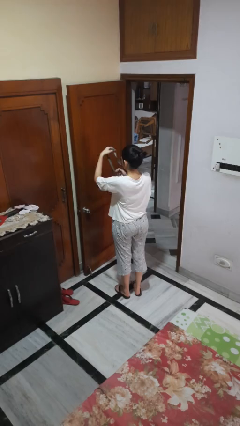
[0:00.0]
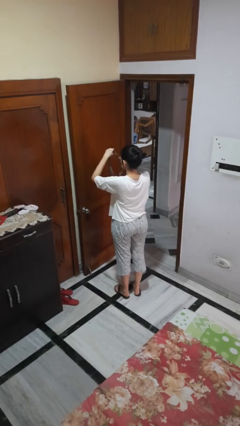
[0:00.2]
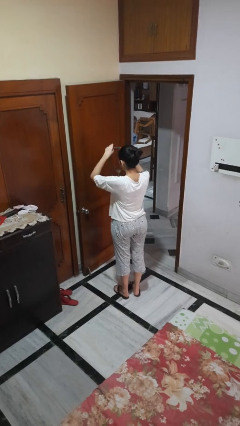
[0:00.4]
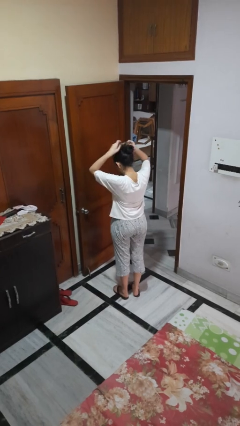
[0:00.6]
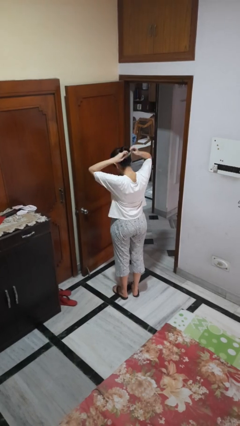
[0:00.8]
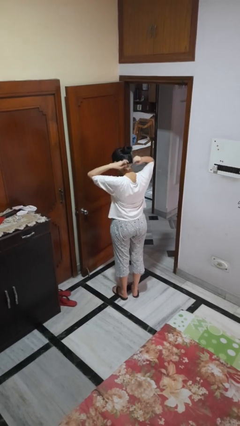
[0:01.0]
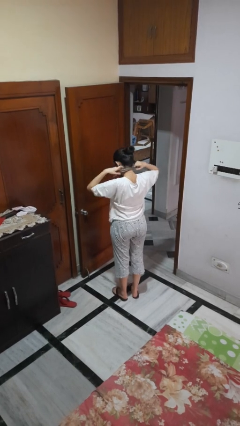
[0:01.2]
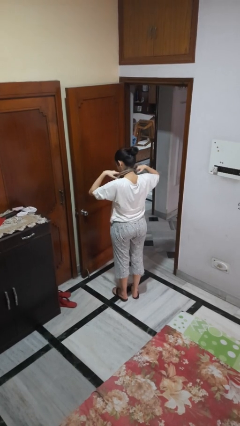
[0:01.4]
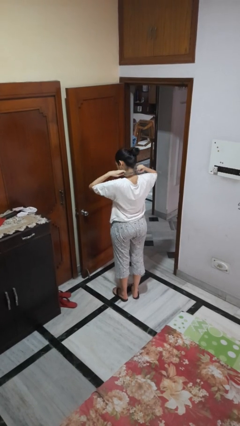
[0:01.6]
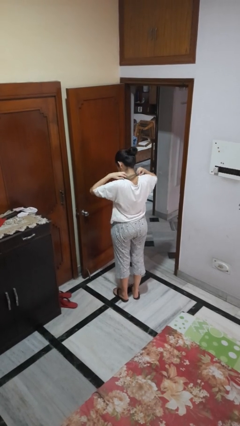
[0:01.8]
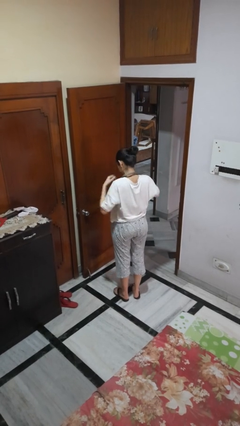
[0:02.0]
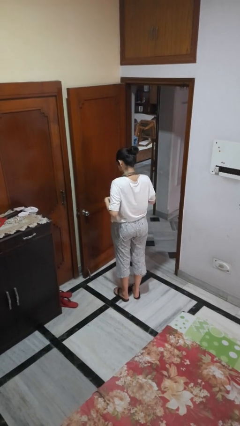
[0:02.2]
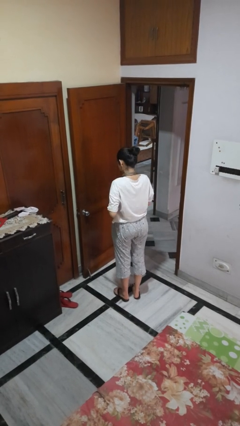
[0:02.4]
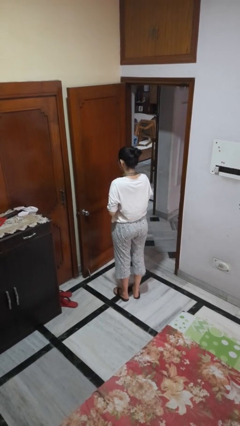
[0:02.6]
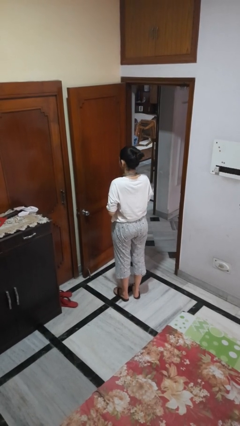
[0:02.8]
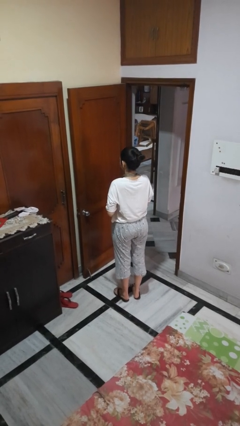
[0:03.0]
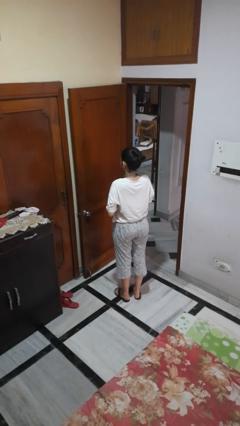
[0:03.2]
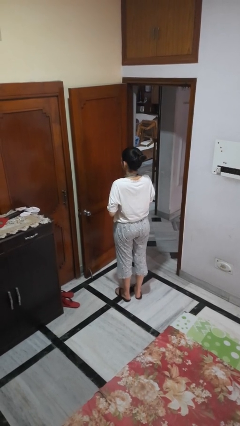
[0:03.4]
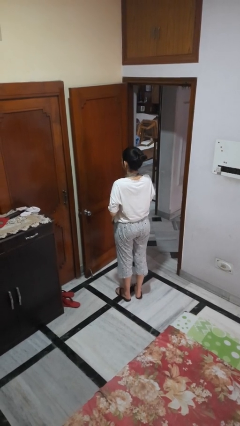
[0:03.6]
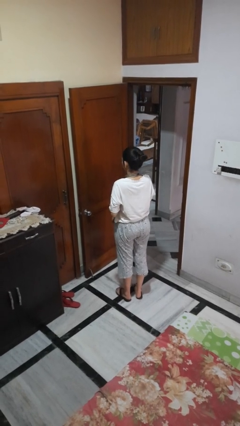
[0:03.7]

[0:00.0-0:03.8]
person puts on necktie

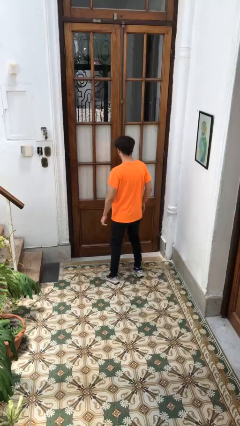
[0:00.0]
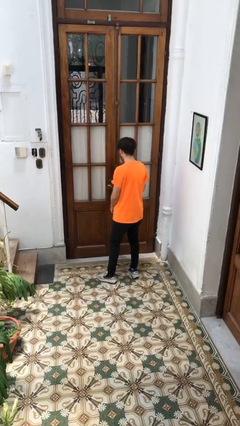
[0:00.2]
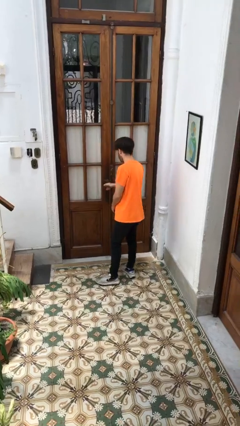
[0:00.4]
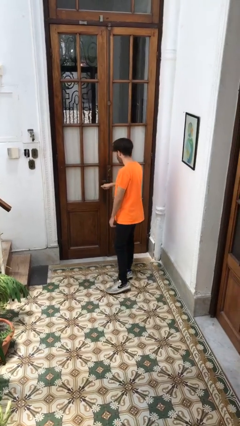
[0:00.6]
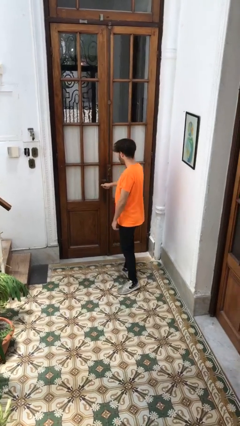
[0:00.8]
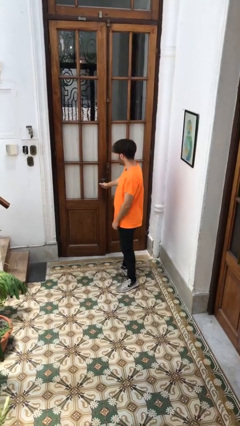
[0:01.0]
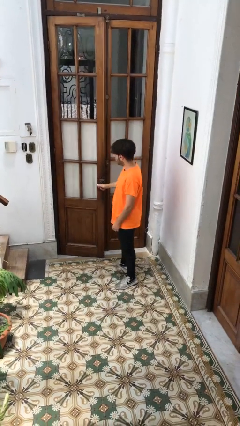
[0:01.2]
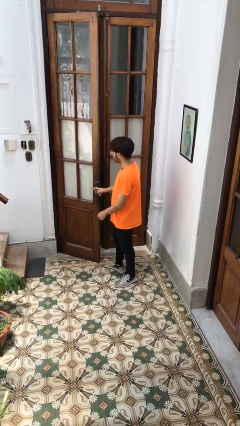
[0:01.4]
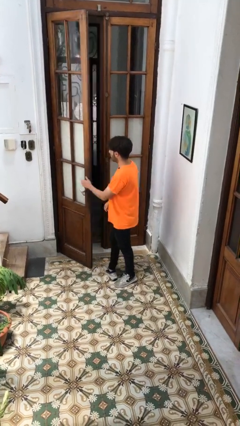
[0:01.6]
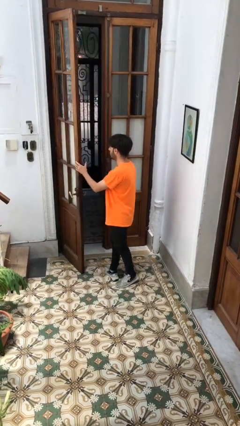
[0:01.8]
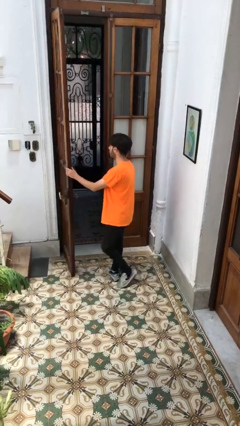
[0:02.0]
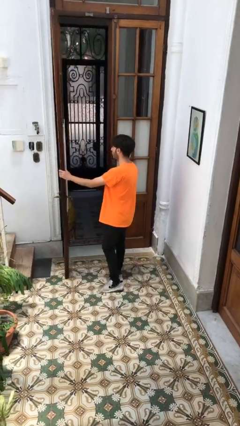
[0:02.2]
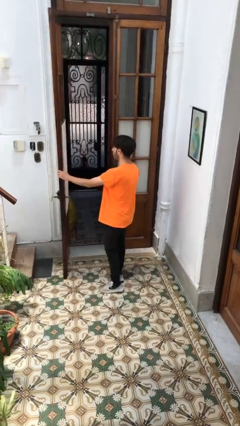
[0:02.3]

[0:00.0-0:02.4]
person opens facility door

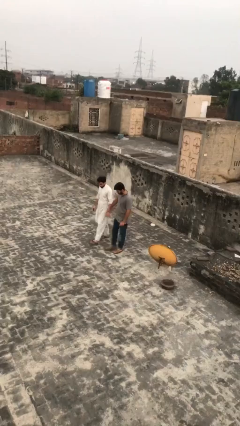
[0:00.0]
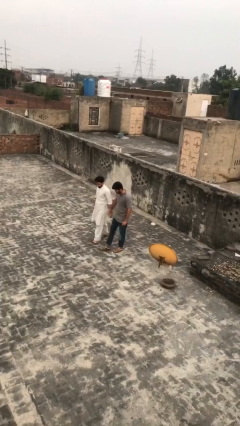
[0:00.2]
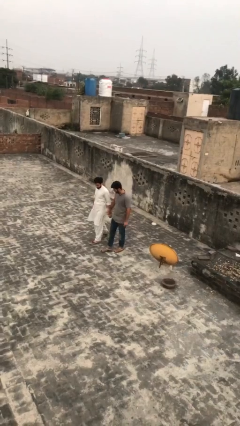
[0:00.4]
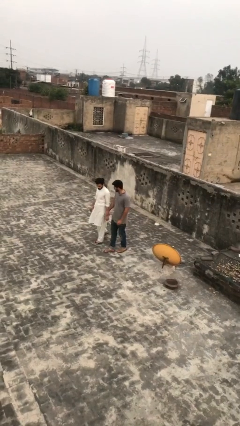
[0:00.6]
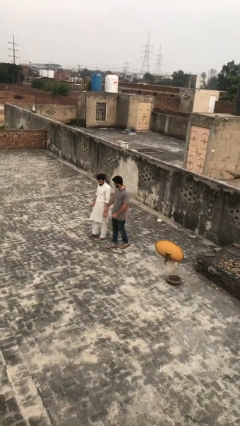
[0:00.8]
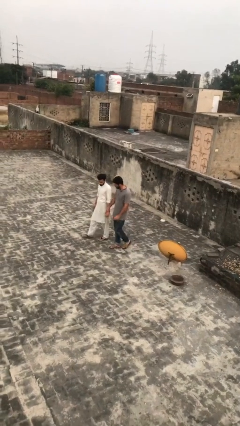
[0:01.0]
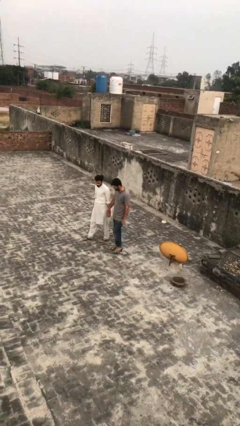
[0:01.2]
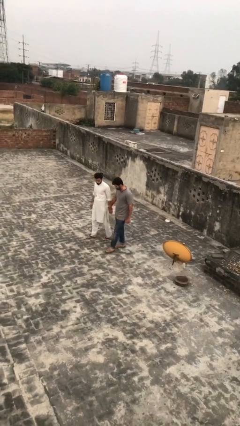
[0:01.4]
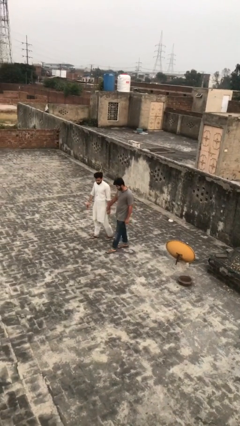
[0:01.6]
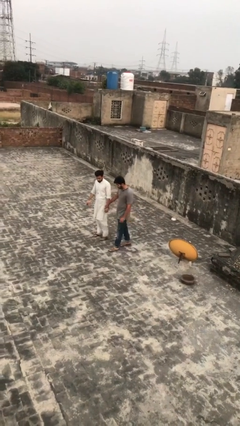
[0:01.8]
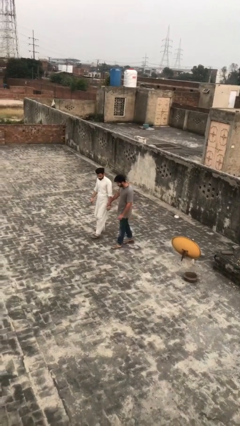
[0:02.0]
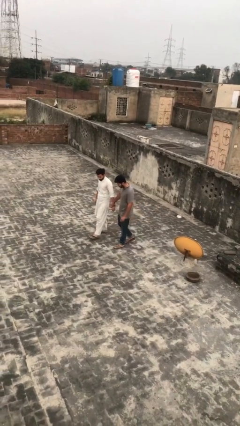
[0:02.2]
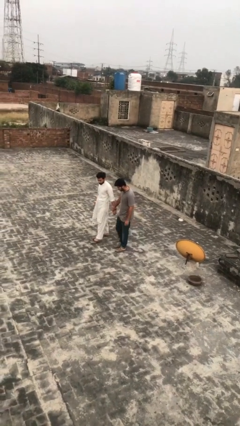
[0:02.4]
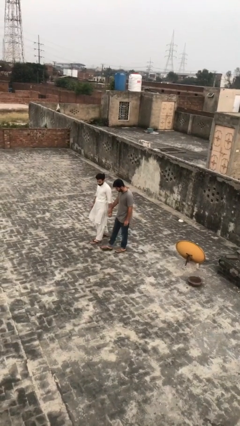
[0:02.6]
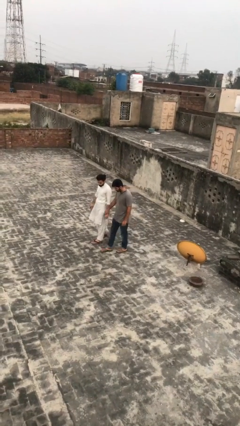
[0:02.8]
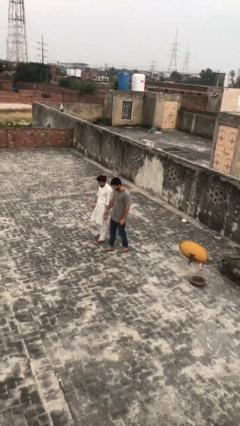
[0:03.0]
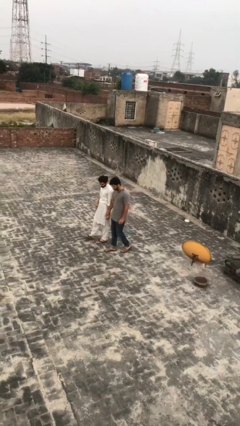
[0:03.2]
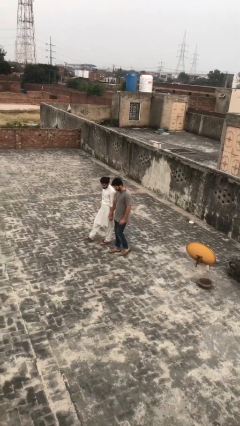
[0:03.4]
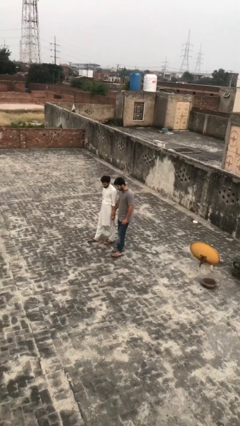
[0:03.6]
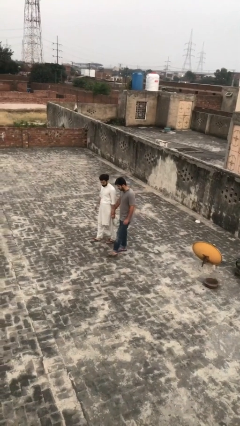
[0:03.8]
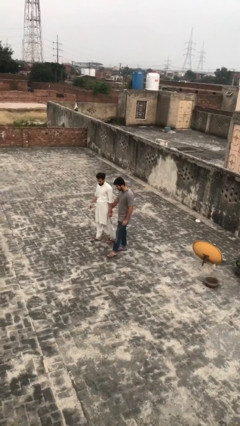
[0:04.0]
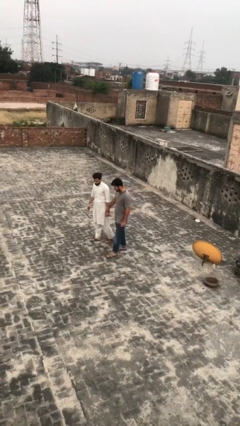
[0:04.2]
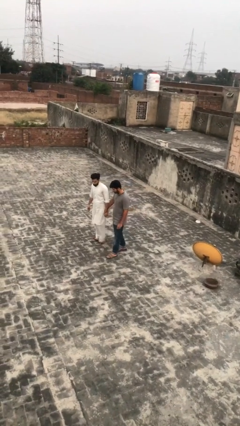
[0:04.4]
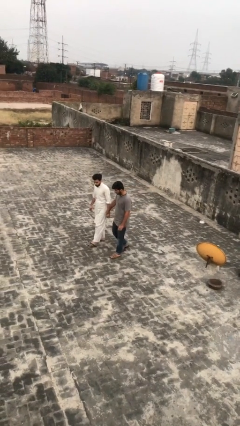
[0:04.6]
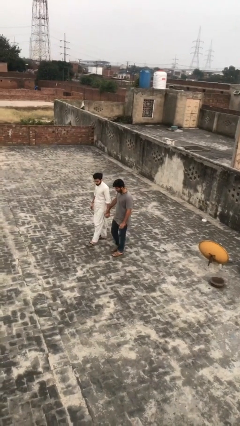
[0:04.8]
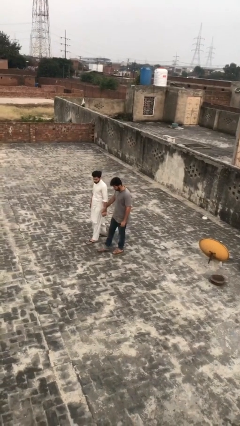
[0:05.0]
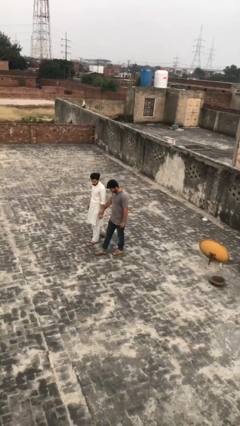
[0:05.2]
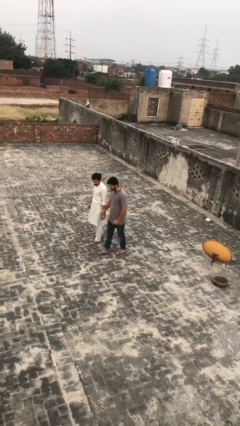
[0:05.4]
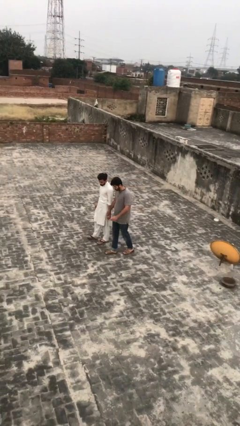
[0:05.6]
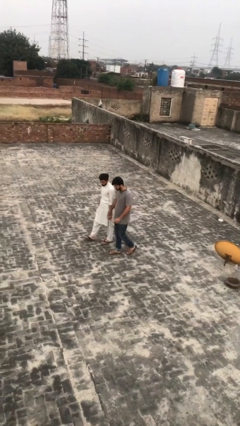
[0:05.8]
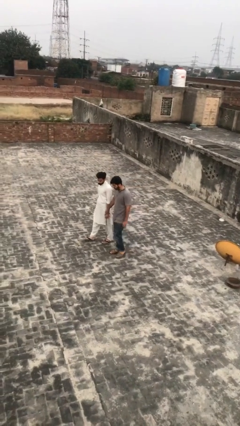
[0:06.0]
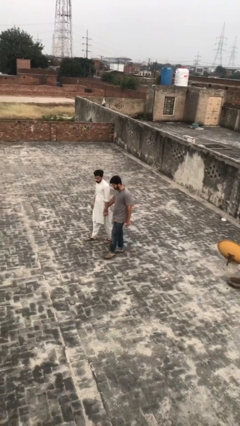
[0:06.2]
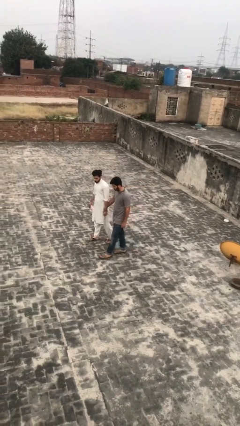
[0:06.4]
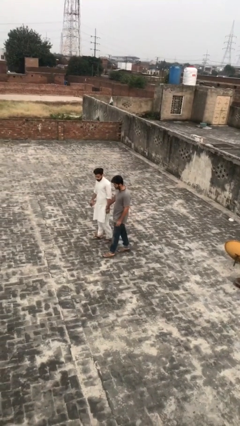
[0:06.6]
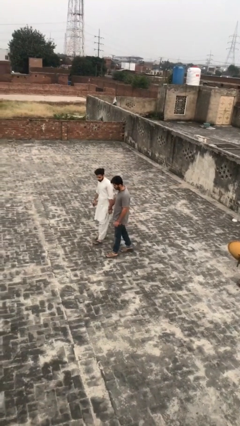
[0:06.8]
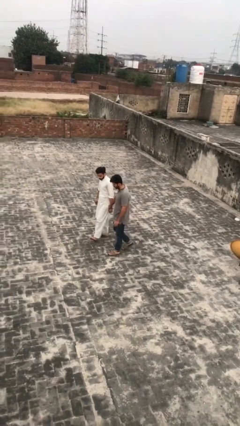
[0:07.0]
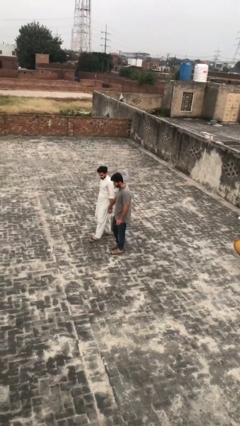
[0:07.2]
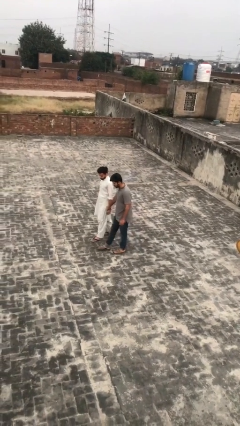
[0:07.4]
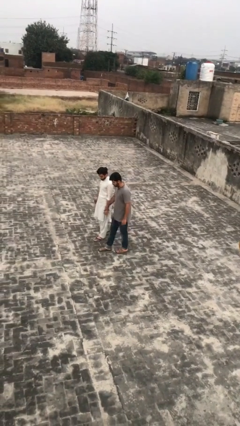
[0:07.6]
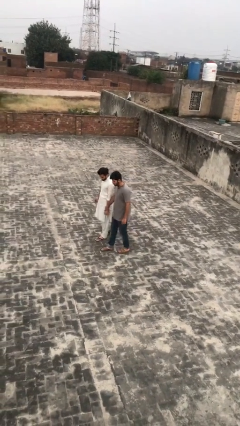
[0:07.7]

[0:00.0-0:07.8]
person holds hand

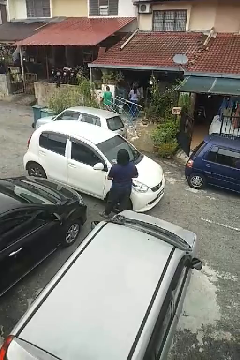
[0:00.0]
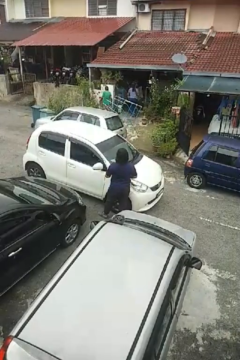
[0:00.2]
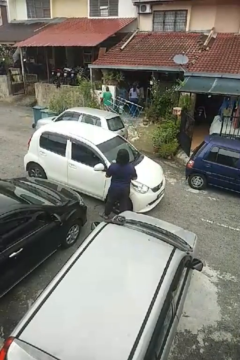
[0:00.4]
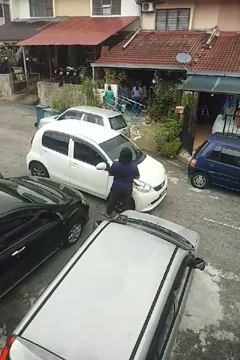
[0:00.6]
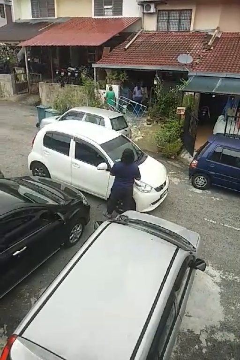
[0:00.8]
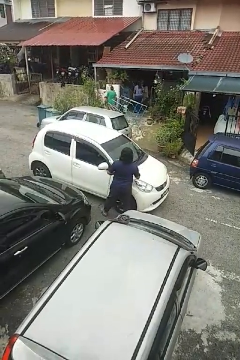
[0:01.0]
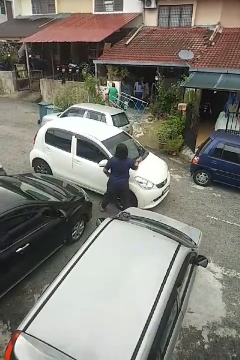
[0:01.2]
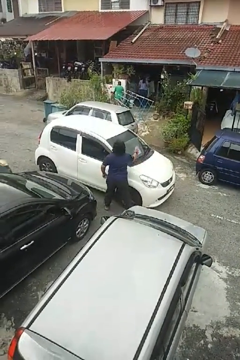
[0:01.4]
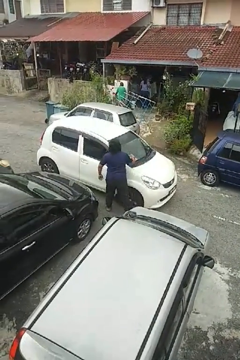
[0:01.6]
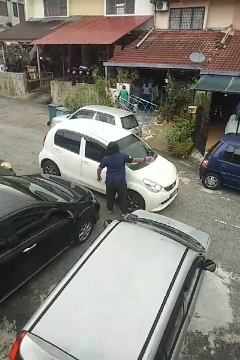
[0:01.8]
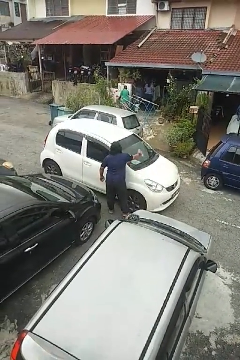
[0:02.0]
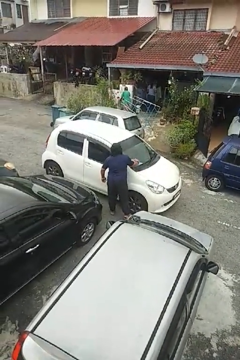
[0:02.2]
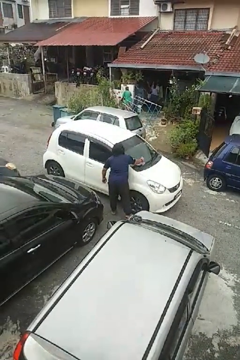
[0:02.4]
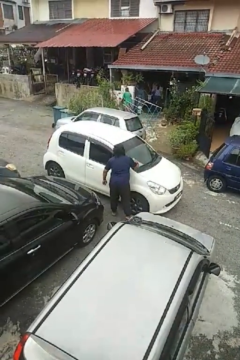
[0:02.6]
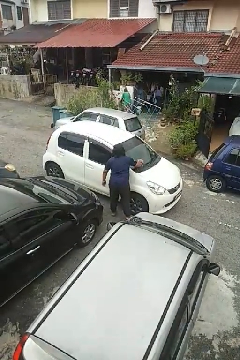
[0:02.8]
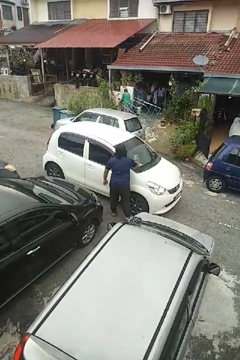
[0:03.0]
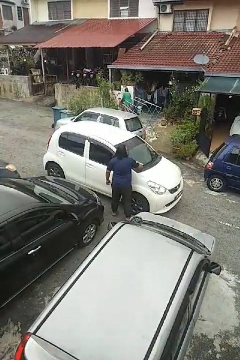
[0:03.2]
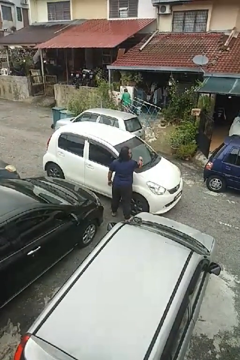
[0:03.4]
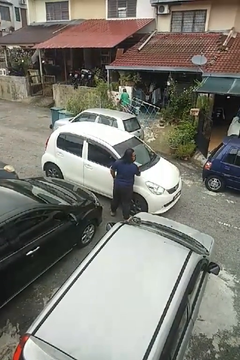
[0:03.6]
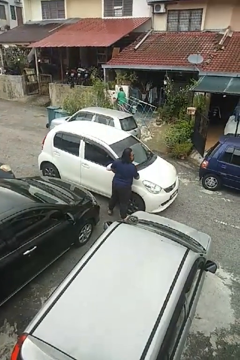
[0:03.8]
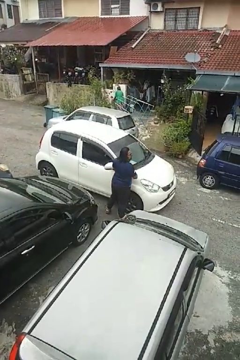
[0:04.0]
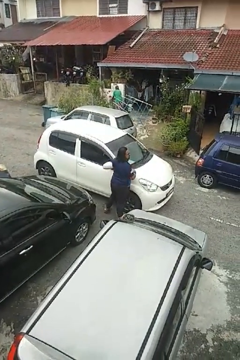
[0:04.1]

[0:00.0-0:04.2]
person polishes car with rag

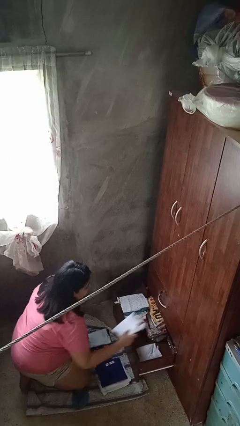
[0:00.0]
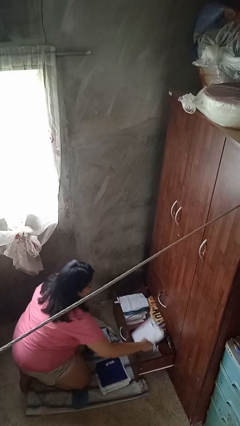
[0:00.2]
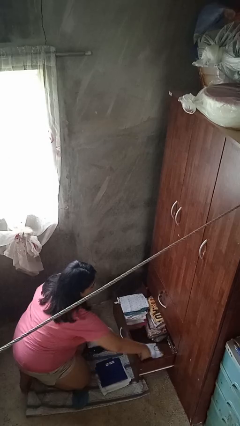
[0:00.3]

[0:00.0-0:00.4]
person puts clothes into dresser
